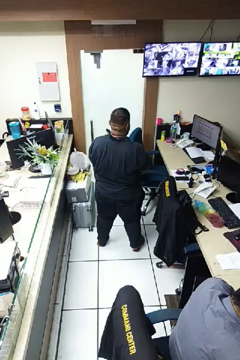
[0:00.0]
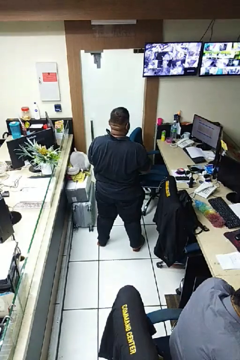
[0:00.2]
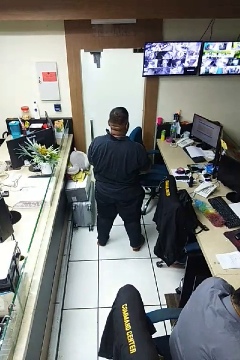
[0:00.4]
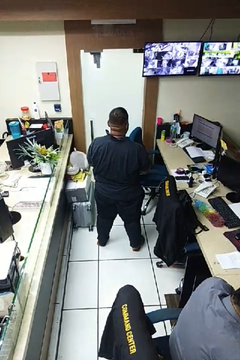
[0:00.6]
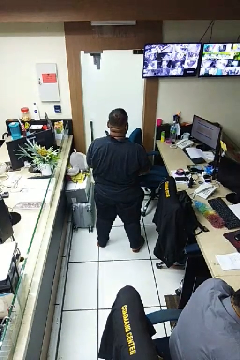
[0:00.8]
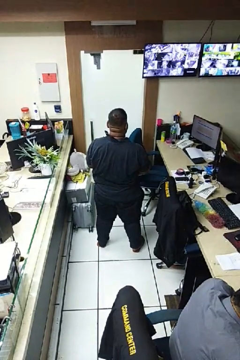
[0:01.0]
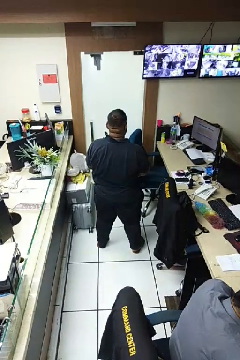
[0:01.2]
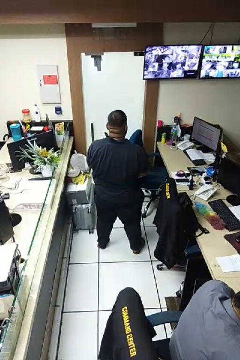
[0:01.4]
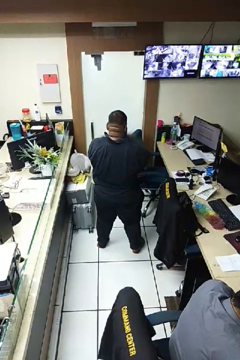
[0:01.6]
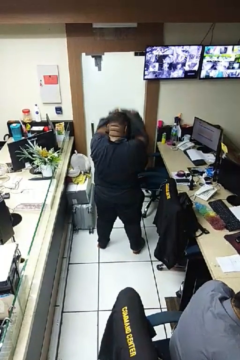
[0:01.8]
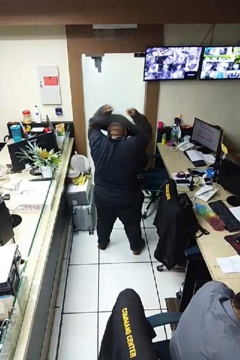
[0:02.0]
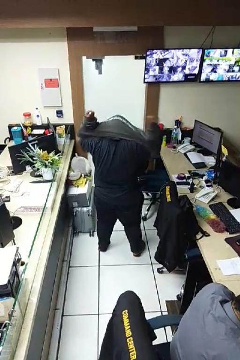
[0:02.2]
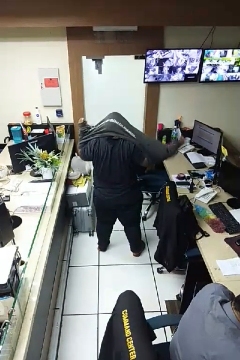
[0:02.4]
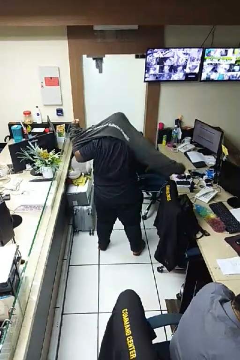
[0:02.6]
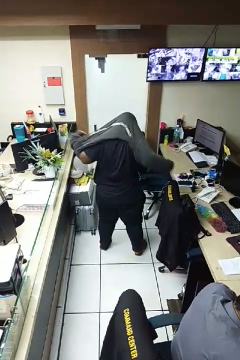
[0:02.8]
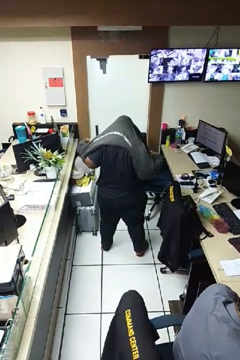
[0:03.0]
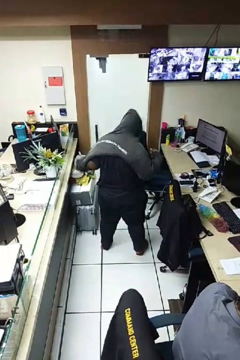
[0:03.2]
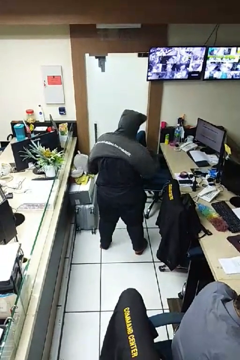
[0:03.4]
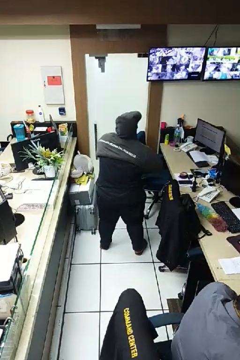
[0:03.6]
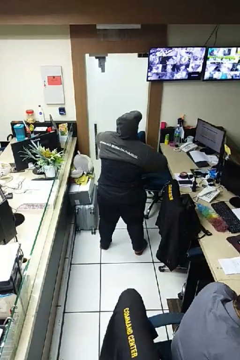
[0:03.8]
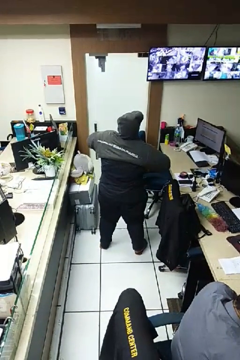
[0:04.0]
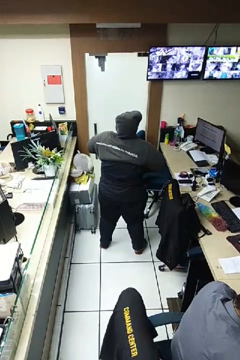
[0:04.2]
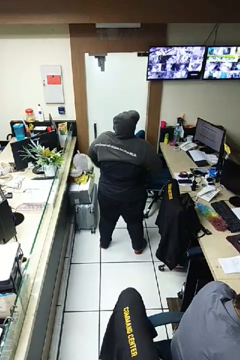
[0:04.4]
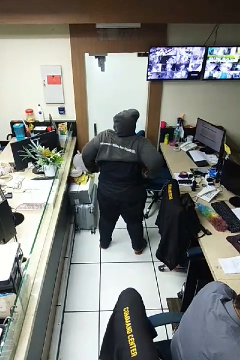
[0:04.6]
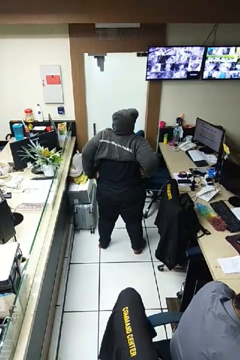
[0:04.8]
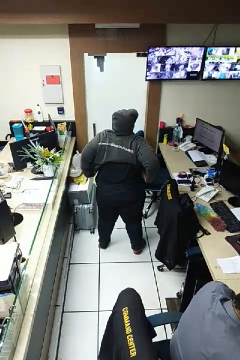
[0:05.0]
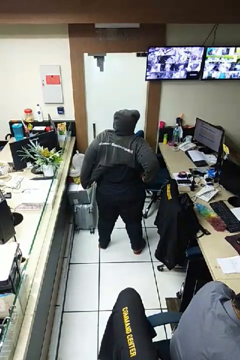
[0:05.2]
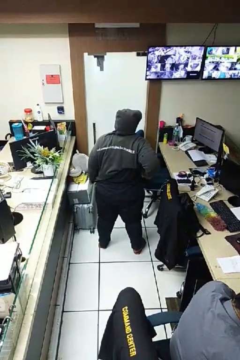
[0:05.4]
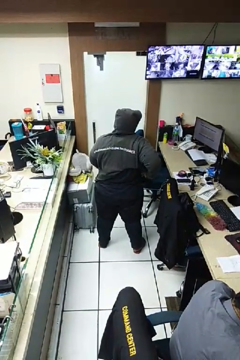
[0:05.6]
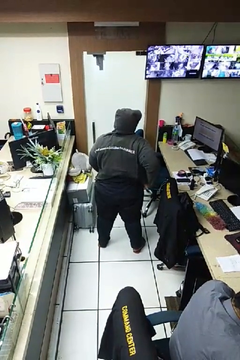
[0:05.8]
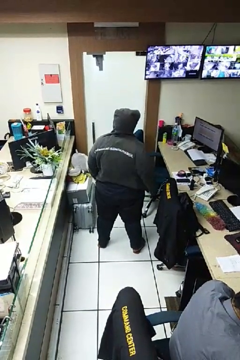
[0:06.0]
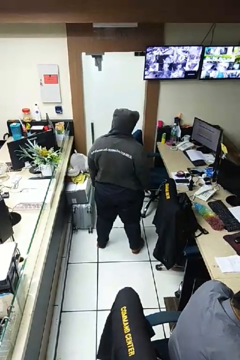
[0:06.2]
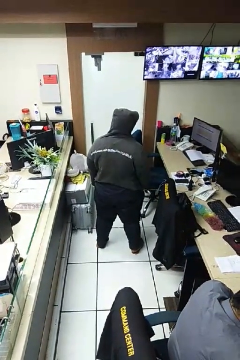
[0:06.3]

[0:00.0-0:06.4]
person puts on hoodie

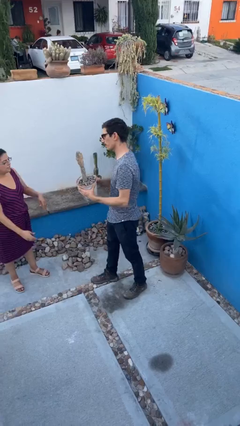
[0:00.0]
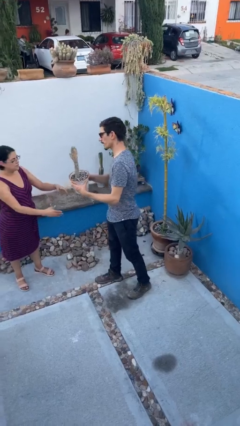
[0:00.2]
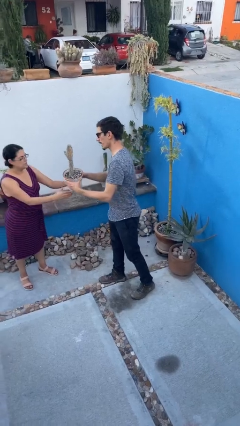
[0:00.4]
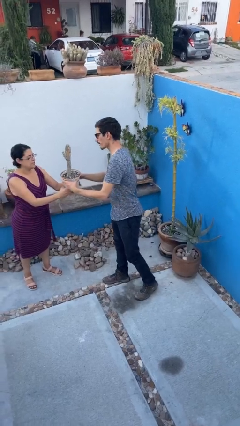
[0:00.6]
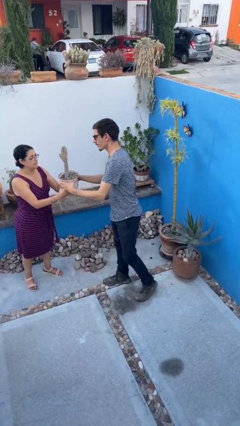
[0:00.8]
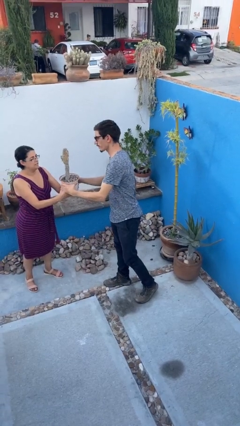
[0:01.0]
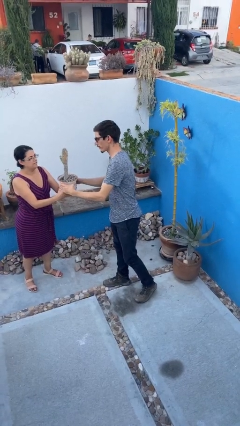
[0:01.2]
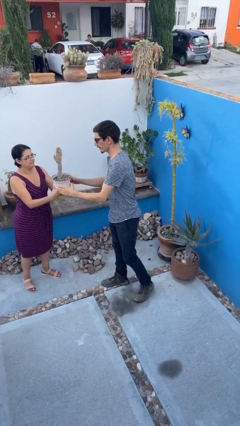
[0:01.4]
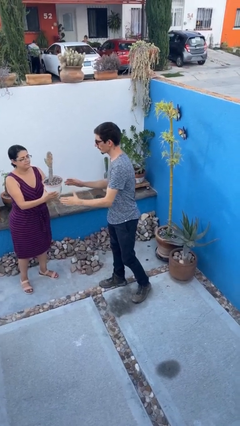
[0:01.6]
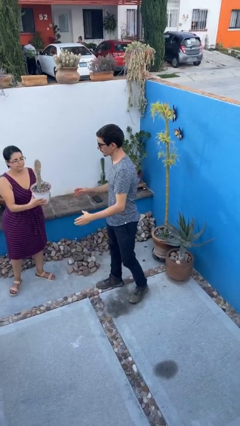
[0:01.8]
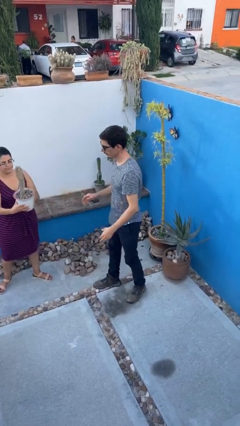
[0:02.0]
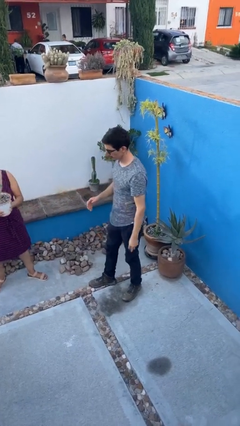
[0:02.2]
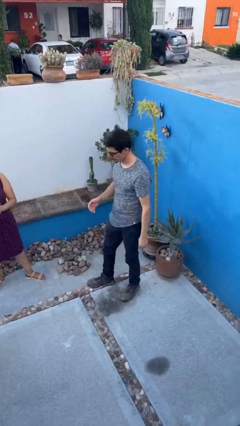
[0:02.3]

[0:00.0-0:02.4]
person transfers object to person

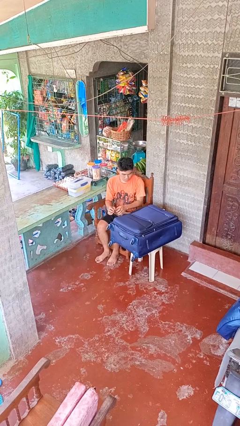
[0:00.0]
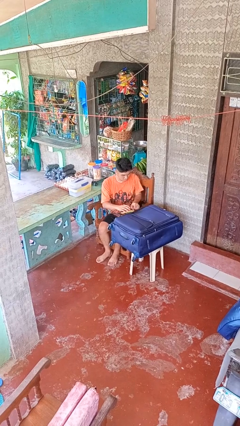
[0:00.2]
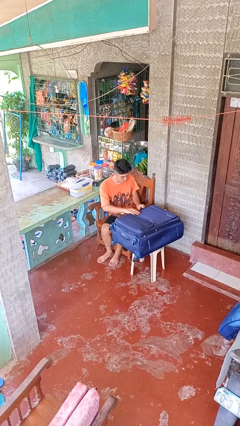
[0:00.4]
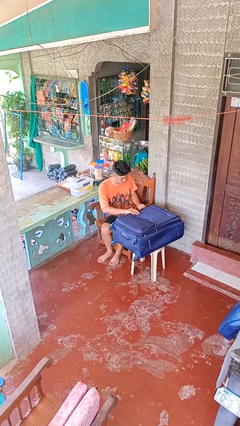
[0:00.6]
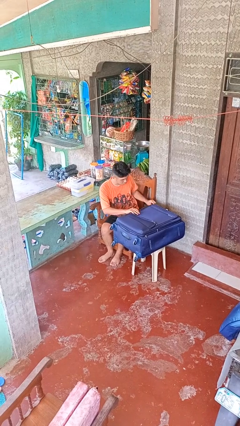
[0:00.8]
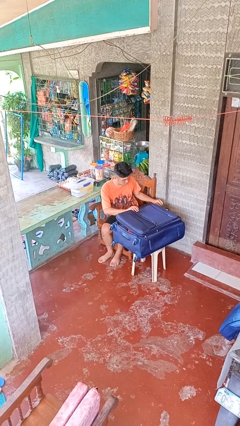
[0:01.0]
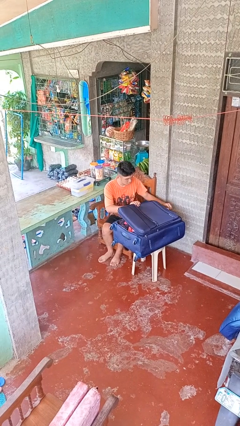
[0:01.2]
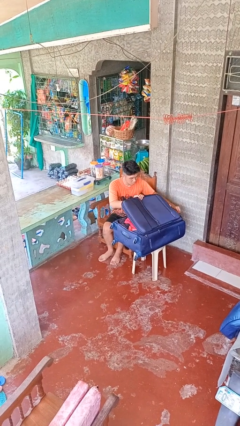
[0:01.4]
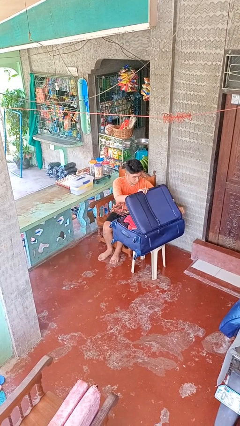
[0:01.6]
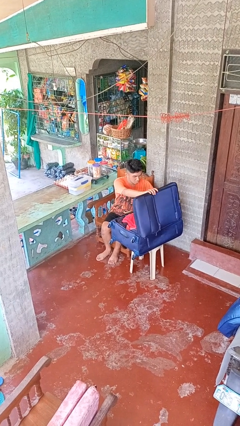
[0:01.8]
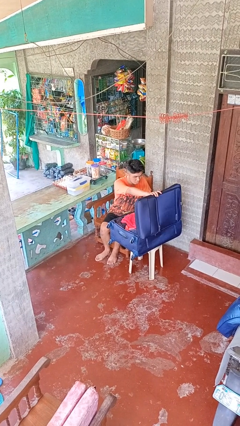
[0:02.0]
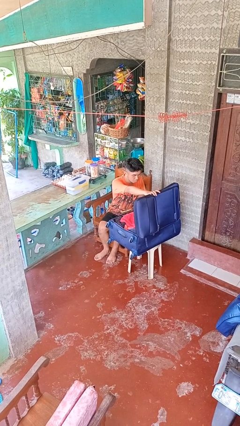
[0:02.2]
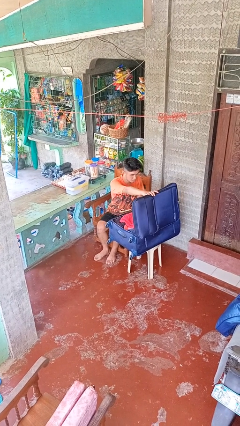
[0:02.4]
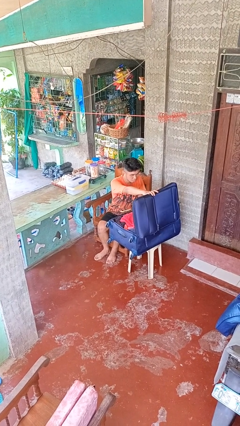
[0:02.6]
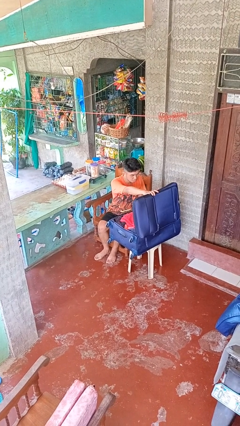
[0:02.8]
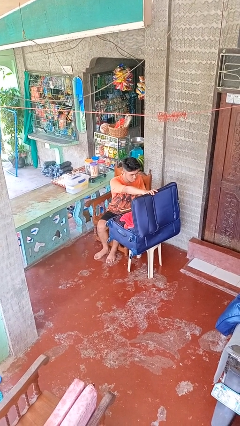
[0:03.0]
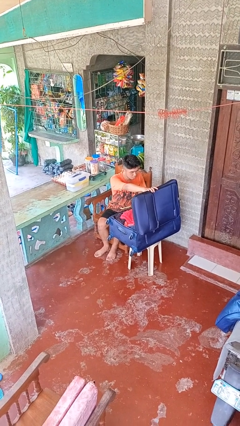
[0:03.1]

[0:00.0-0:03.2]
person opens suitcase

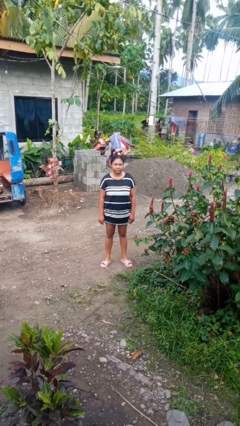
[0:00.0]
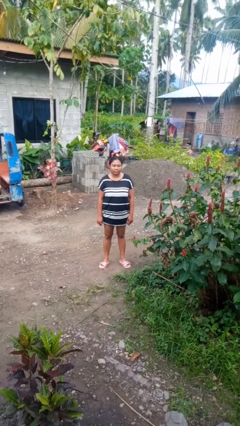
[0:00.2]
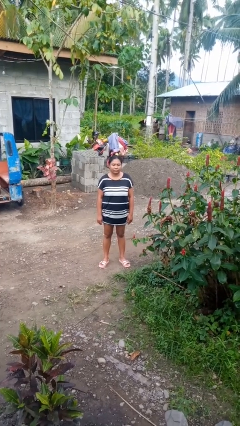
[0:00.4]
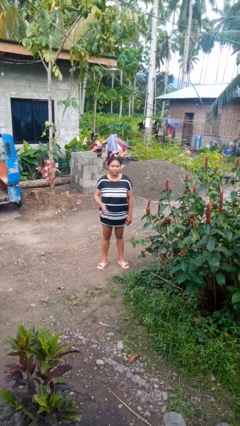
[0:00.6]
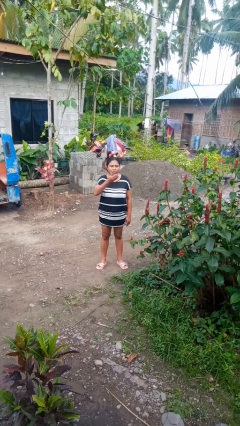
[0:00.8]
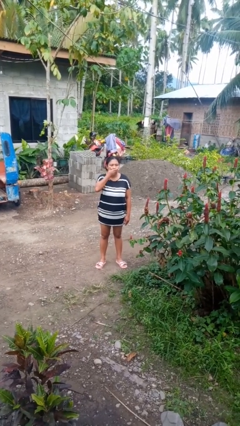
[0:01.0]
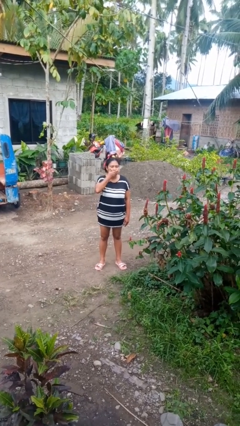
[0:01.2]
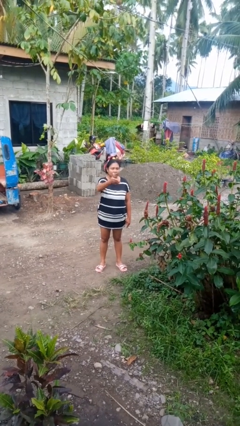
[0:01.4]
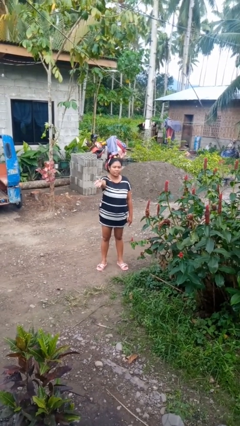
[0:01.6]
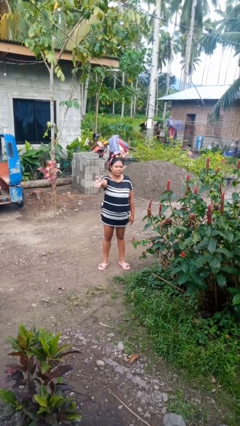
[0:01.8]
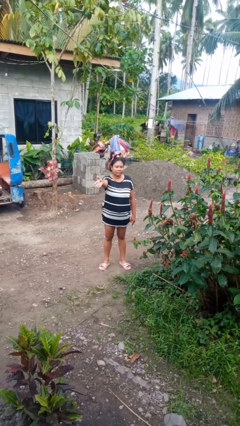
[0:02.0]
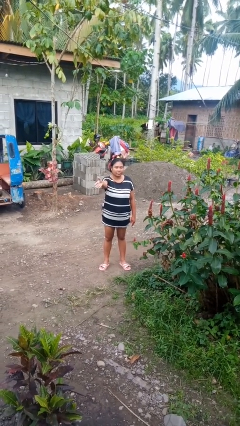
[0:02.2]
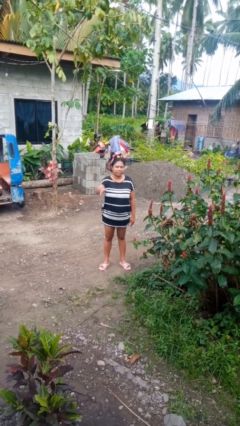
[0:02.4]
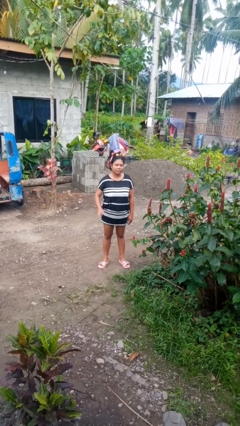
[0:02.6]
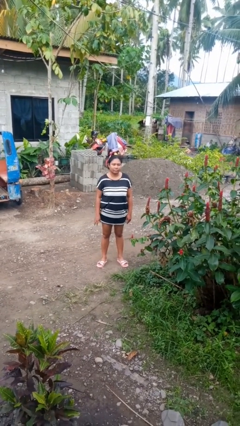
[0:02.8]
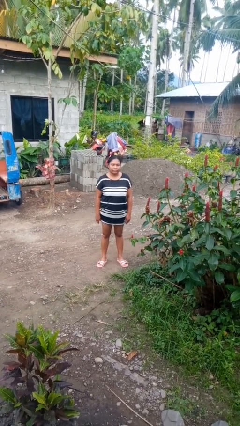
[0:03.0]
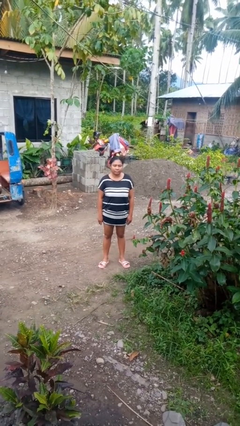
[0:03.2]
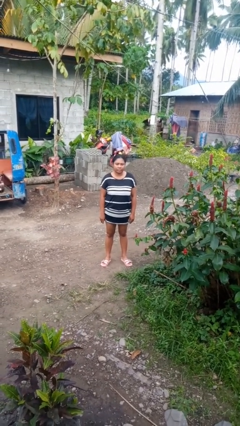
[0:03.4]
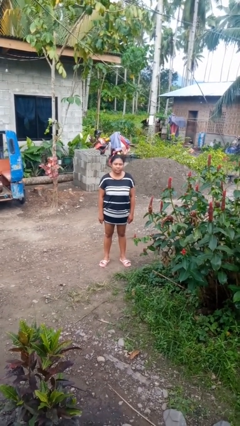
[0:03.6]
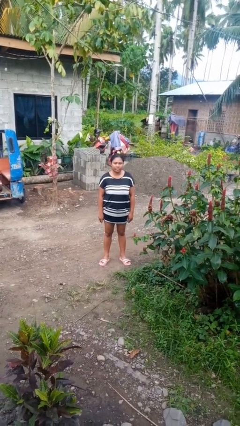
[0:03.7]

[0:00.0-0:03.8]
person gestures blow kiss

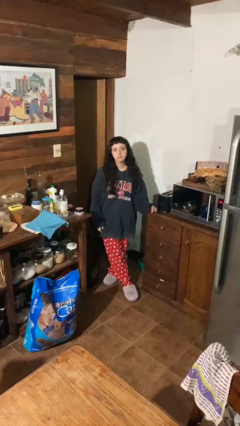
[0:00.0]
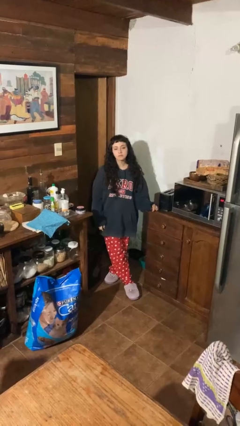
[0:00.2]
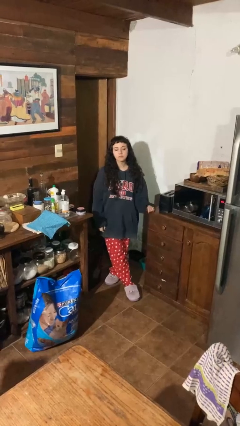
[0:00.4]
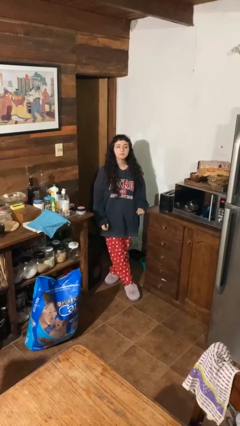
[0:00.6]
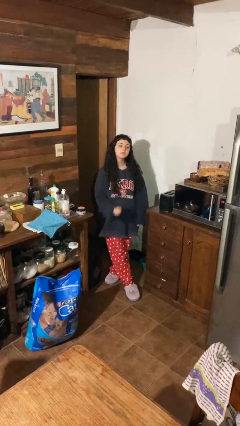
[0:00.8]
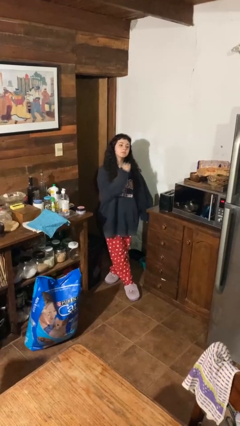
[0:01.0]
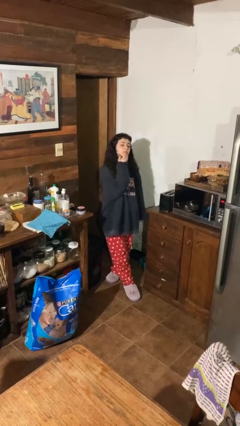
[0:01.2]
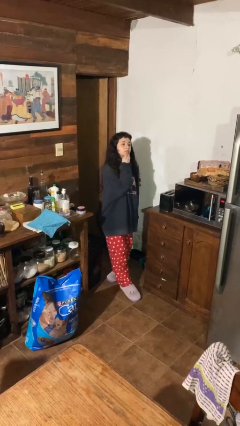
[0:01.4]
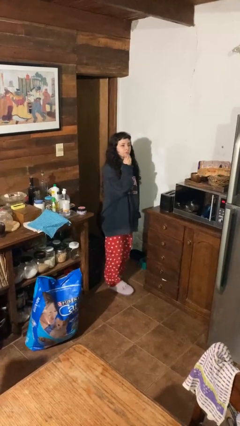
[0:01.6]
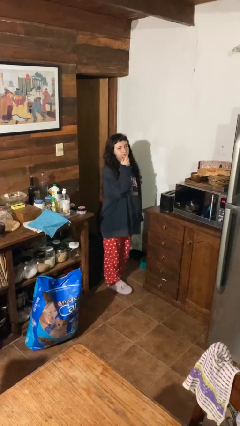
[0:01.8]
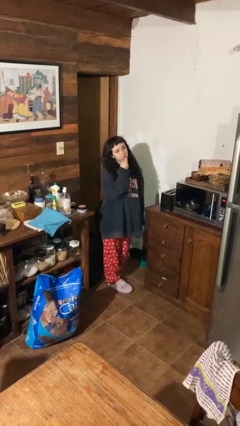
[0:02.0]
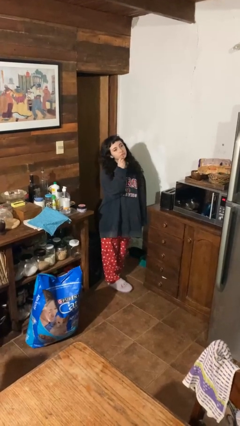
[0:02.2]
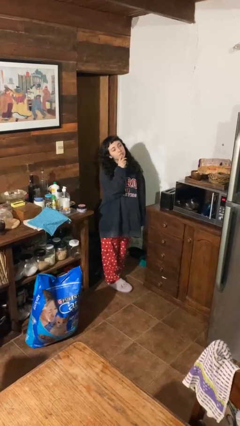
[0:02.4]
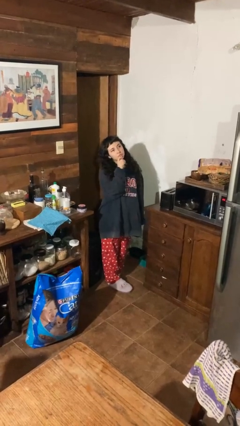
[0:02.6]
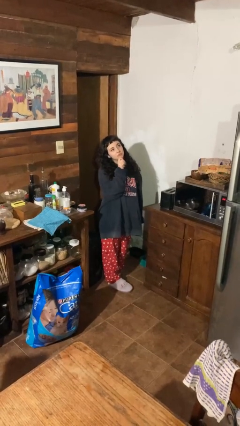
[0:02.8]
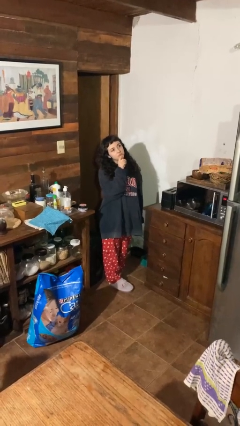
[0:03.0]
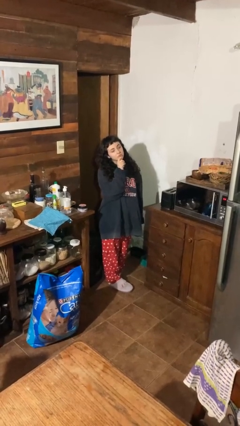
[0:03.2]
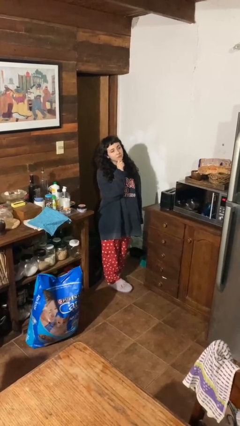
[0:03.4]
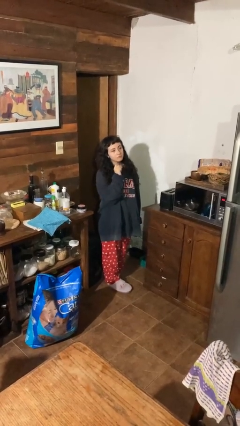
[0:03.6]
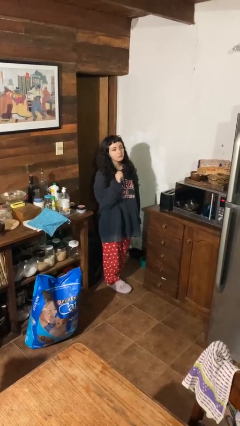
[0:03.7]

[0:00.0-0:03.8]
person strokes chin
